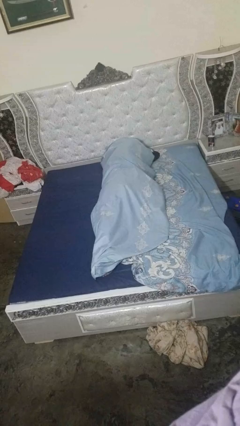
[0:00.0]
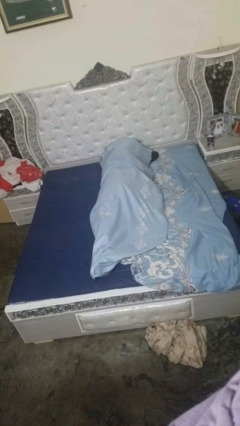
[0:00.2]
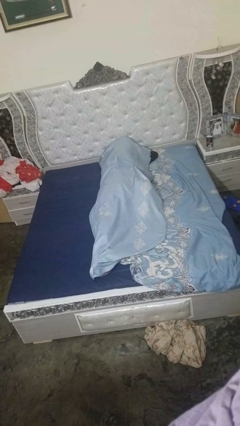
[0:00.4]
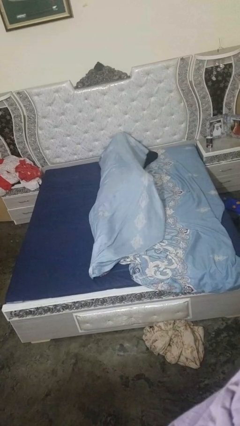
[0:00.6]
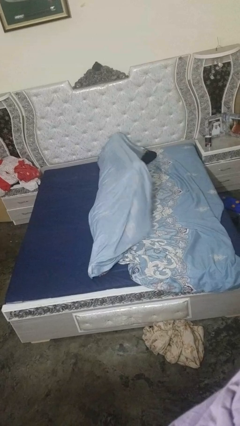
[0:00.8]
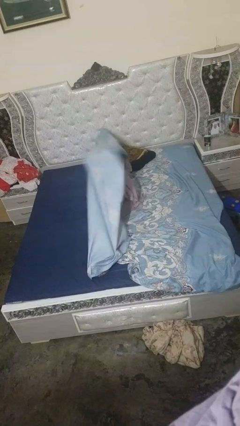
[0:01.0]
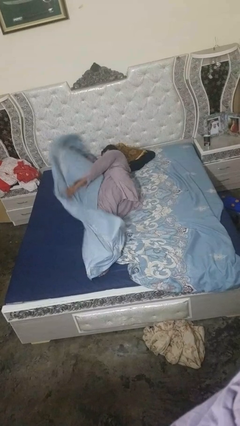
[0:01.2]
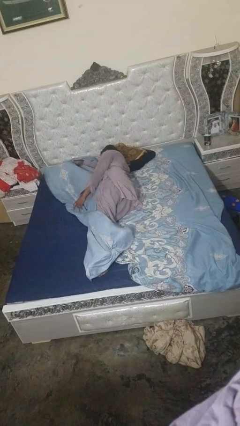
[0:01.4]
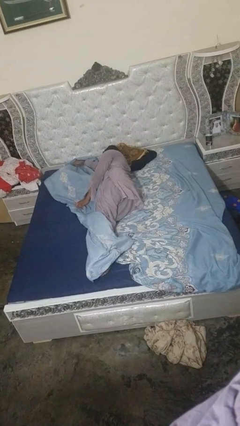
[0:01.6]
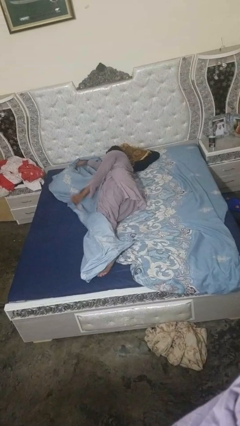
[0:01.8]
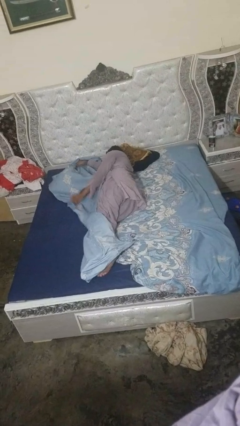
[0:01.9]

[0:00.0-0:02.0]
person uncovers with bedsheets

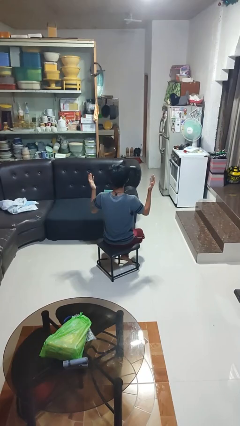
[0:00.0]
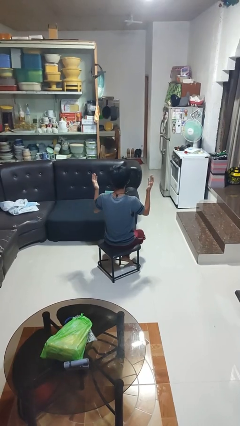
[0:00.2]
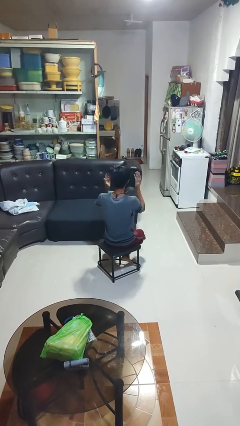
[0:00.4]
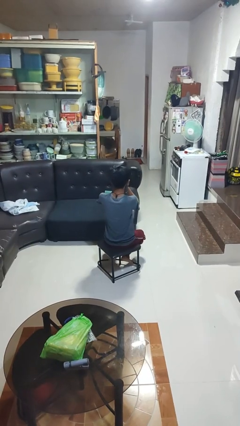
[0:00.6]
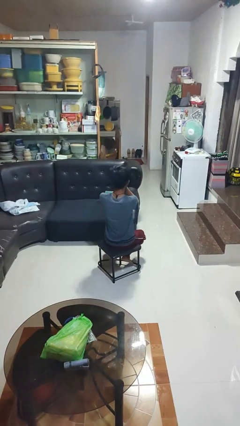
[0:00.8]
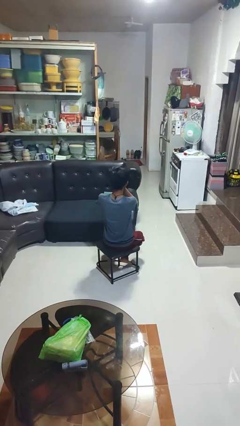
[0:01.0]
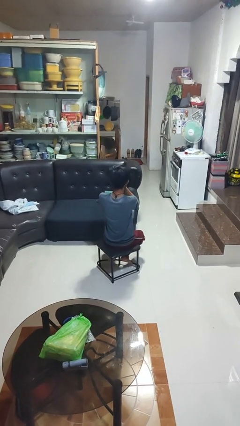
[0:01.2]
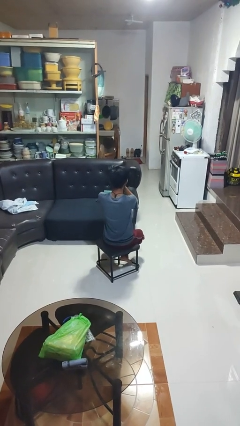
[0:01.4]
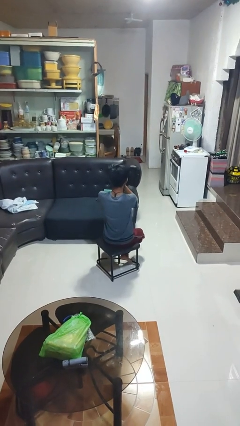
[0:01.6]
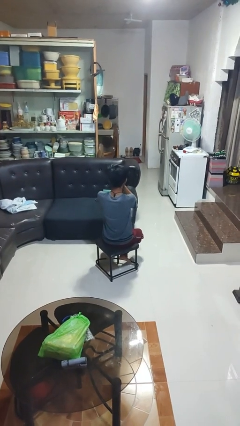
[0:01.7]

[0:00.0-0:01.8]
person covers face with hands

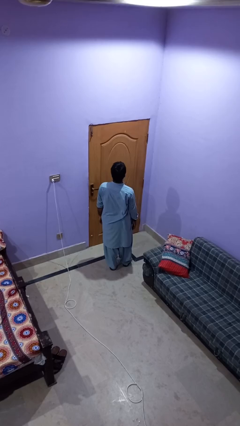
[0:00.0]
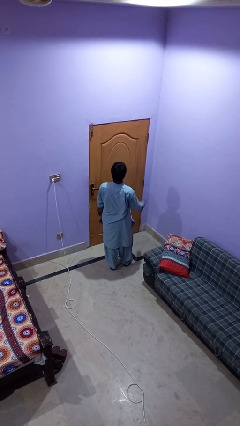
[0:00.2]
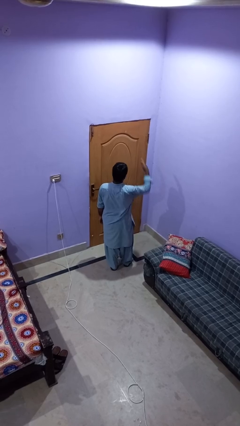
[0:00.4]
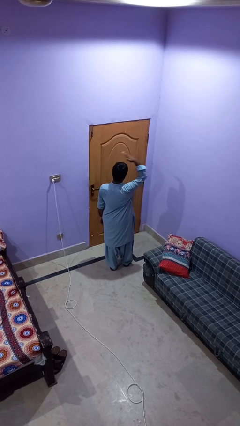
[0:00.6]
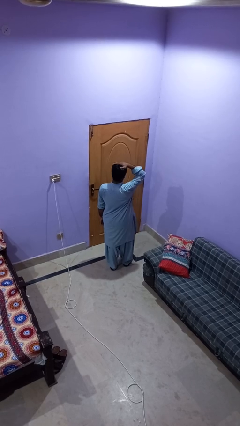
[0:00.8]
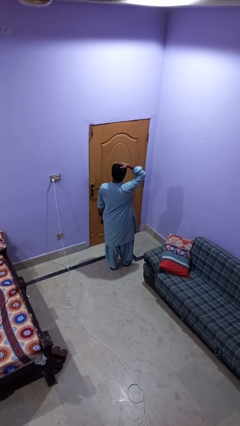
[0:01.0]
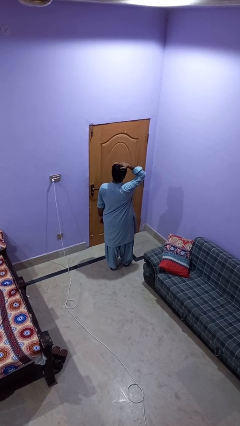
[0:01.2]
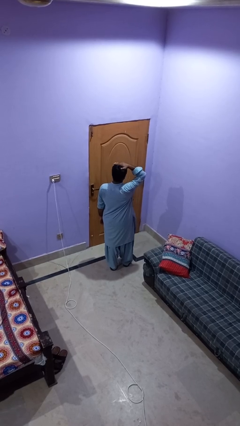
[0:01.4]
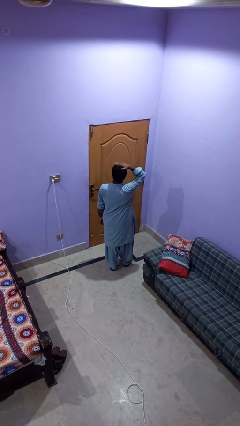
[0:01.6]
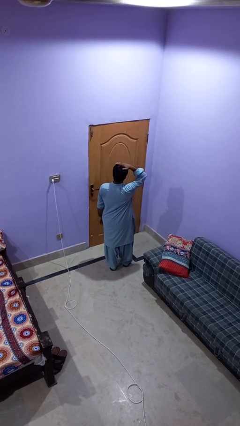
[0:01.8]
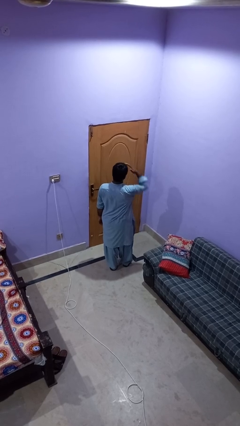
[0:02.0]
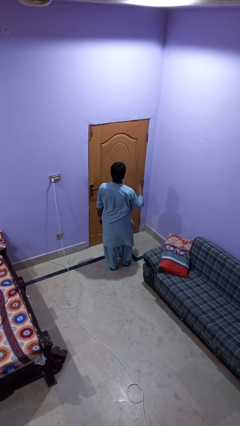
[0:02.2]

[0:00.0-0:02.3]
person pats head

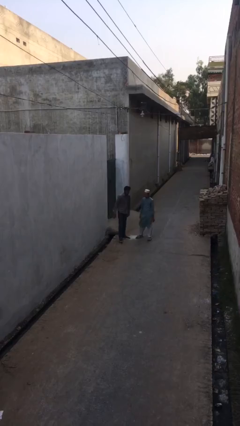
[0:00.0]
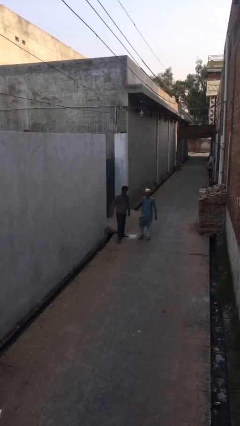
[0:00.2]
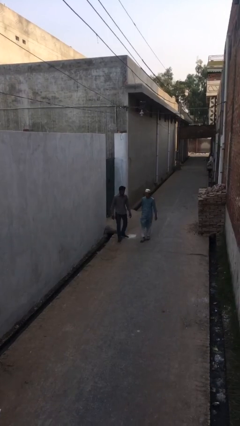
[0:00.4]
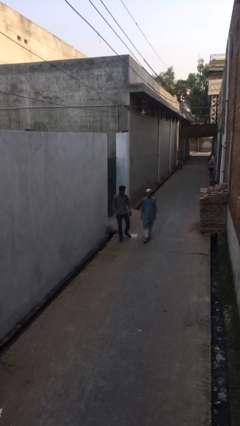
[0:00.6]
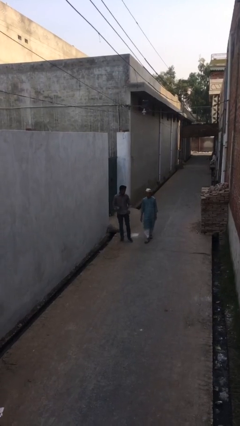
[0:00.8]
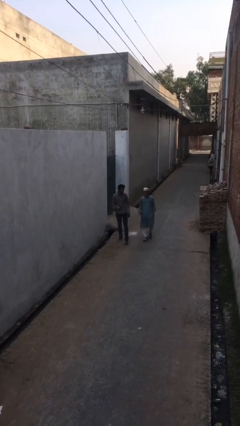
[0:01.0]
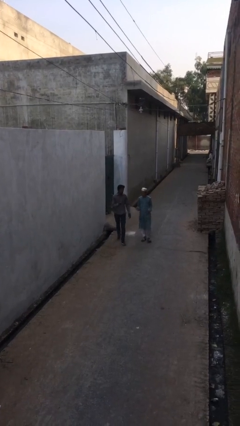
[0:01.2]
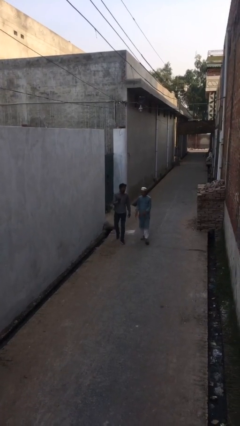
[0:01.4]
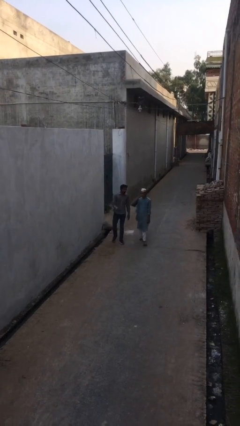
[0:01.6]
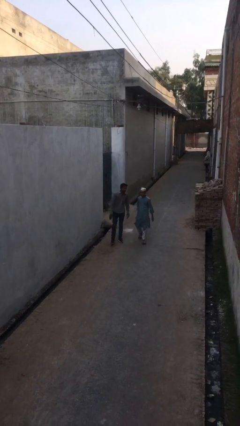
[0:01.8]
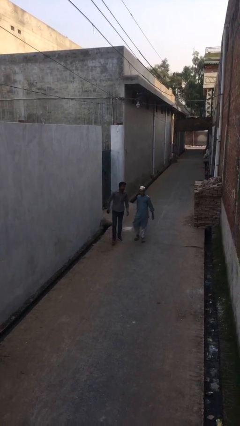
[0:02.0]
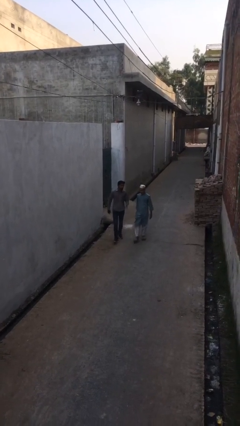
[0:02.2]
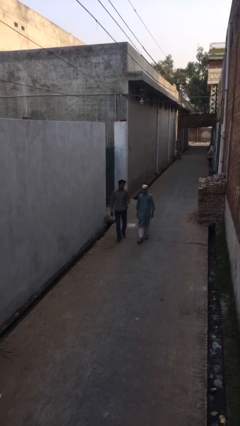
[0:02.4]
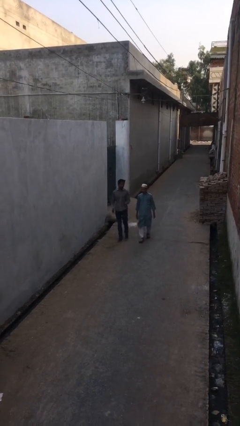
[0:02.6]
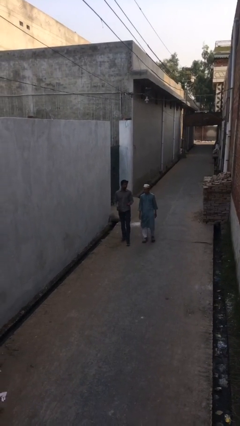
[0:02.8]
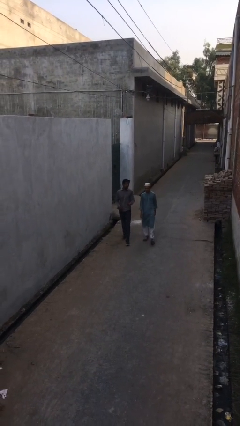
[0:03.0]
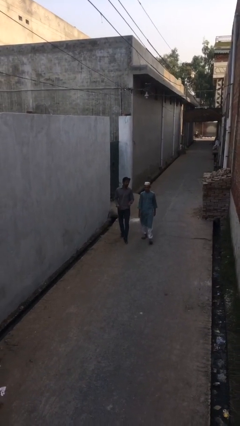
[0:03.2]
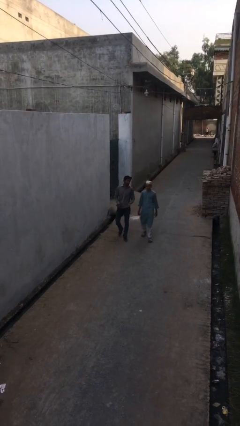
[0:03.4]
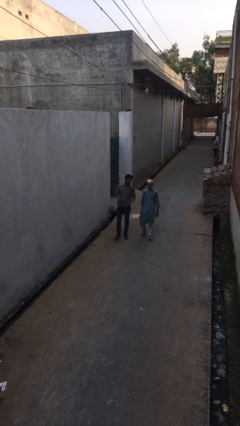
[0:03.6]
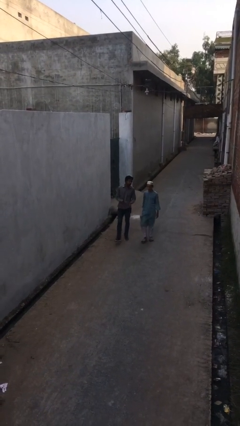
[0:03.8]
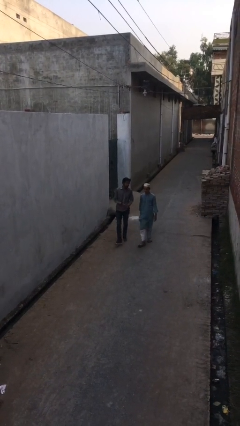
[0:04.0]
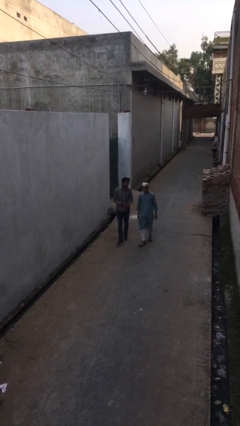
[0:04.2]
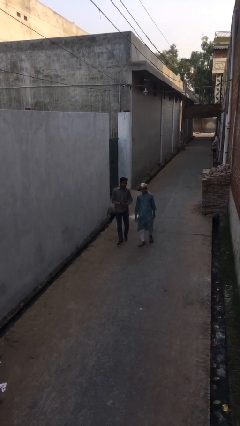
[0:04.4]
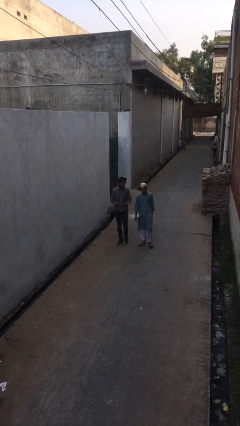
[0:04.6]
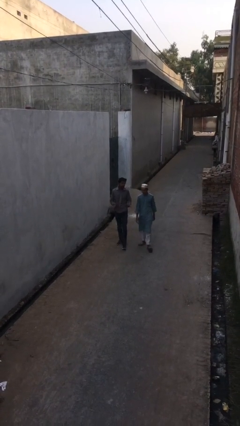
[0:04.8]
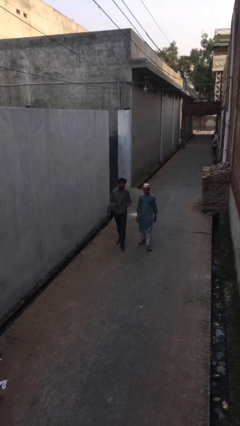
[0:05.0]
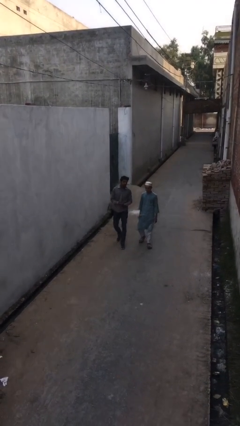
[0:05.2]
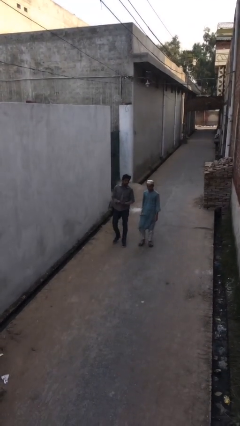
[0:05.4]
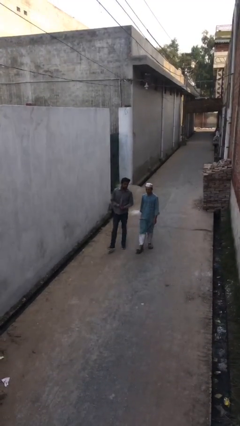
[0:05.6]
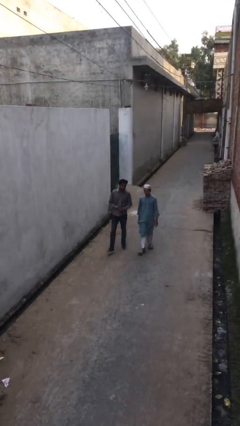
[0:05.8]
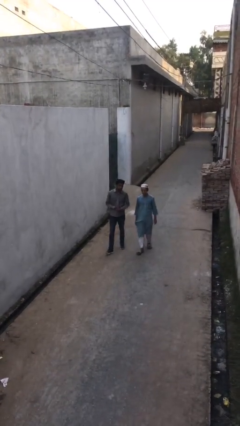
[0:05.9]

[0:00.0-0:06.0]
person talks to person

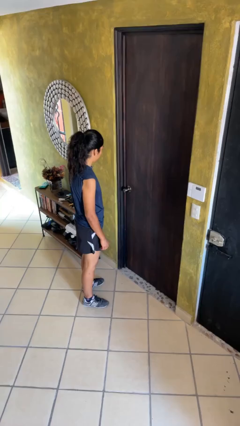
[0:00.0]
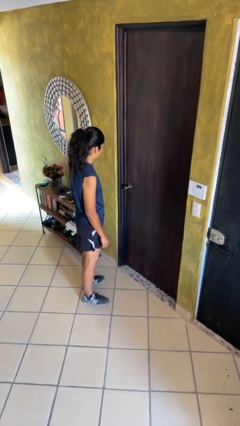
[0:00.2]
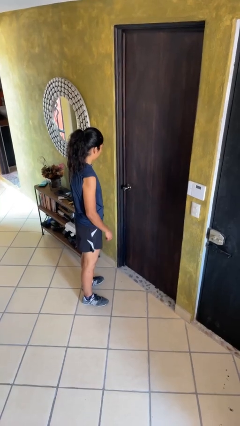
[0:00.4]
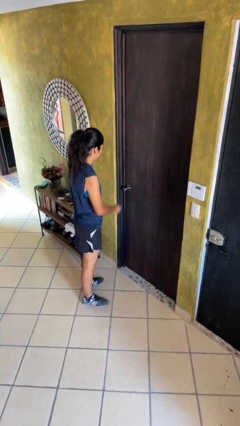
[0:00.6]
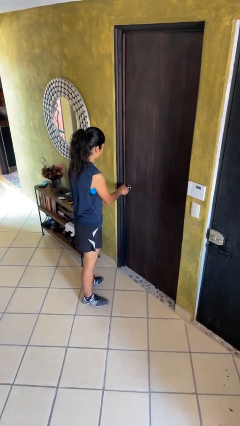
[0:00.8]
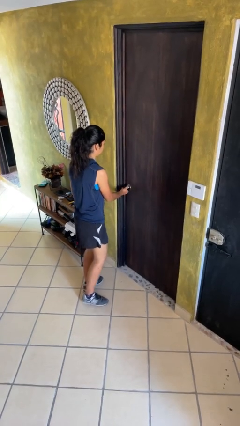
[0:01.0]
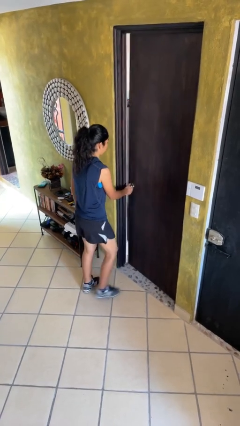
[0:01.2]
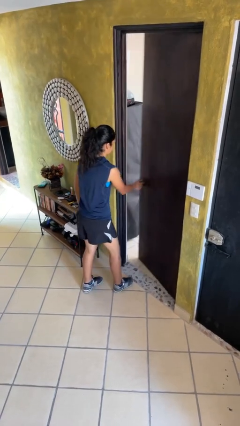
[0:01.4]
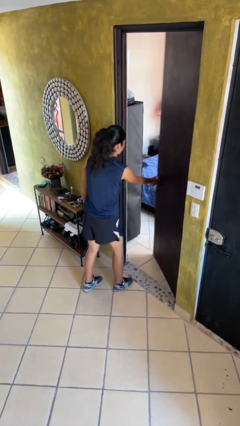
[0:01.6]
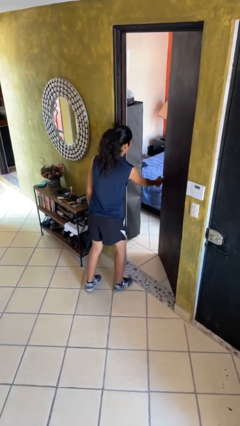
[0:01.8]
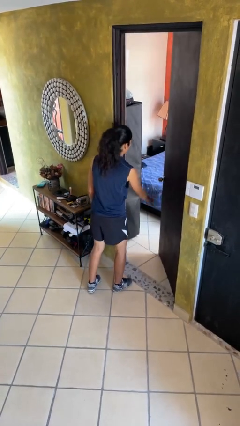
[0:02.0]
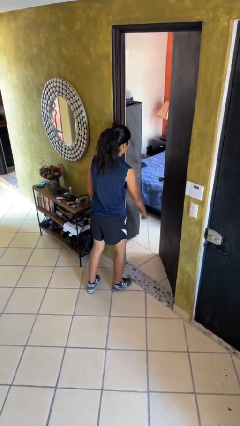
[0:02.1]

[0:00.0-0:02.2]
person opens facility door

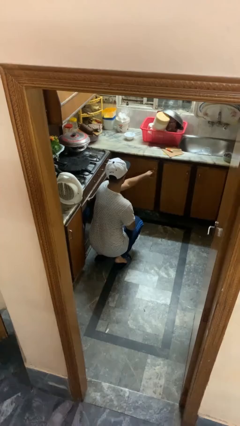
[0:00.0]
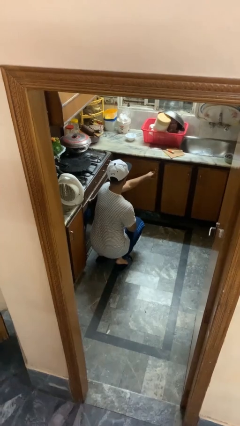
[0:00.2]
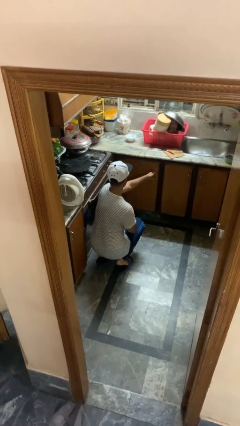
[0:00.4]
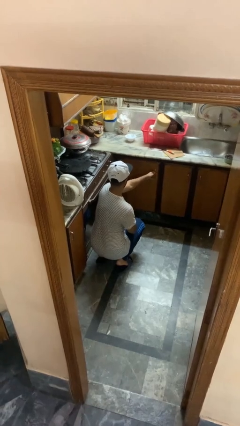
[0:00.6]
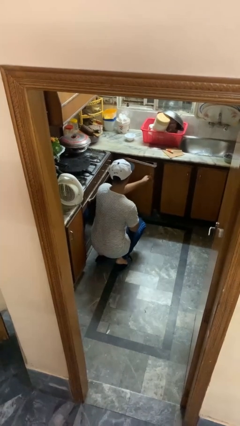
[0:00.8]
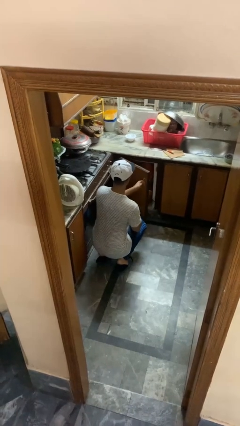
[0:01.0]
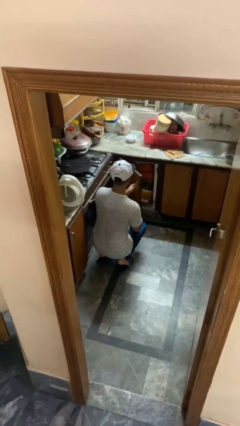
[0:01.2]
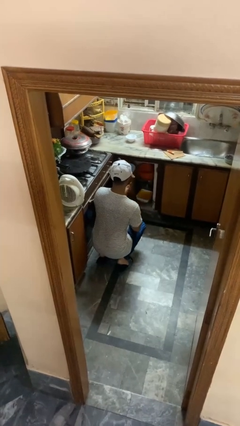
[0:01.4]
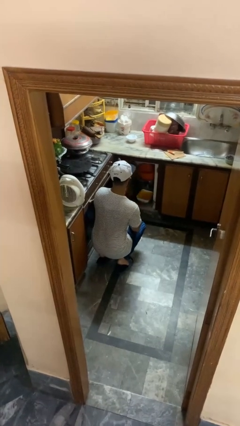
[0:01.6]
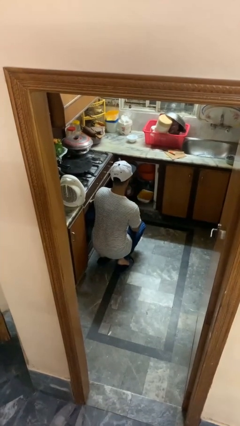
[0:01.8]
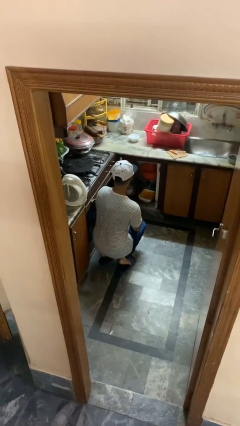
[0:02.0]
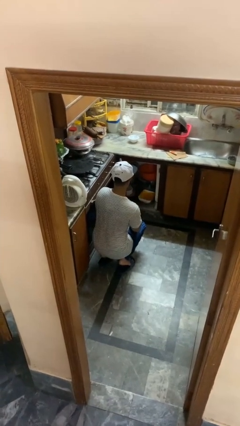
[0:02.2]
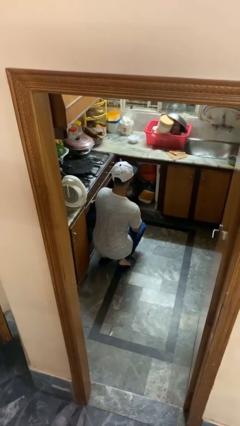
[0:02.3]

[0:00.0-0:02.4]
person opens kitchen drawer

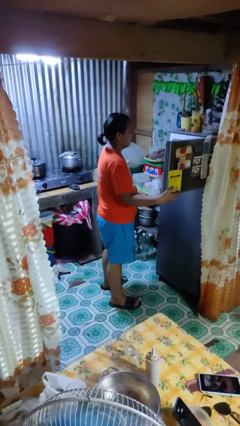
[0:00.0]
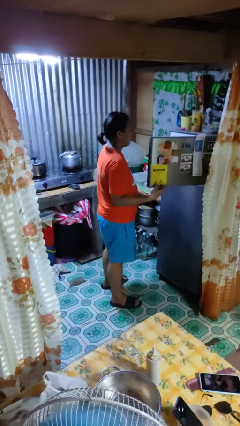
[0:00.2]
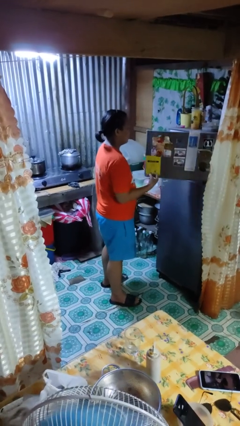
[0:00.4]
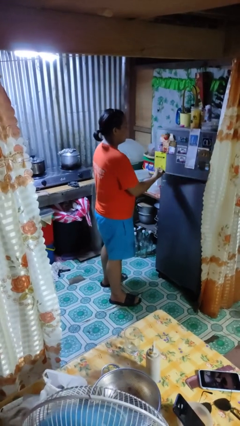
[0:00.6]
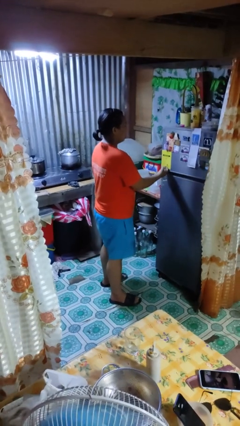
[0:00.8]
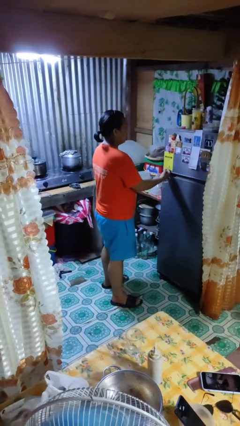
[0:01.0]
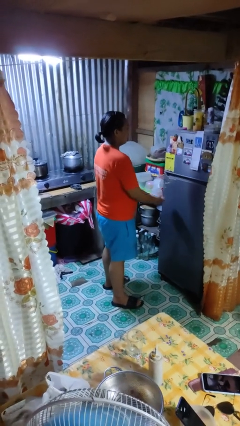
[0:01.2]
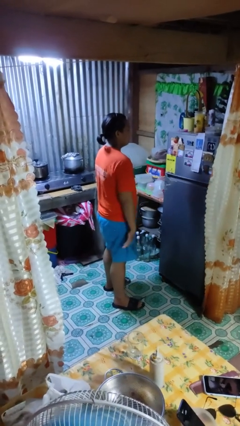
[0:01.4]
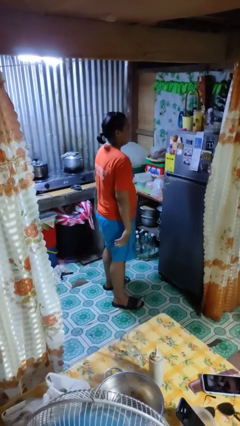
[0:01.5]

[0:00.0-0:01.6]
person closes refrigerator
